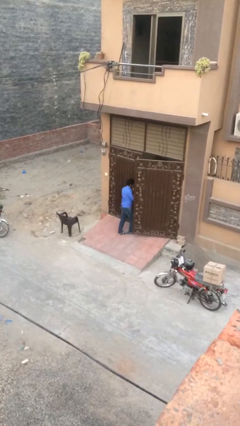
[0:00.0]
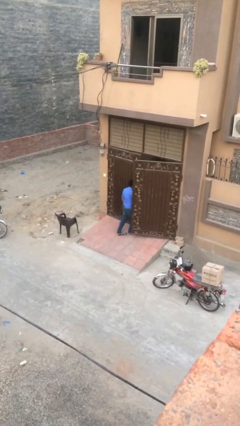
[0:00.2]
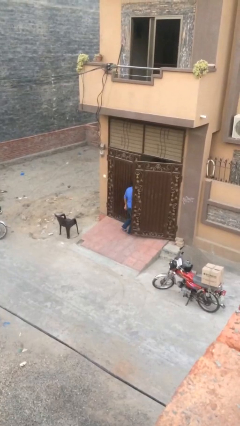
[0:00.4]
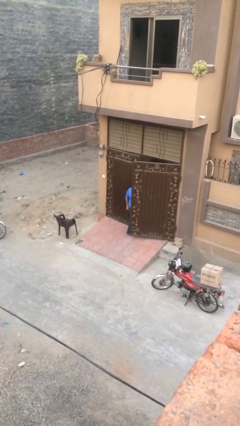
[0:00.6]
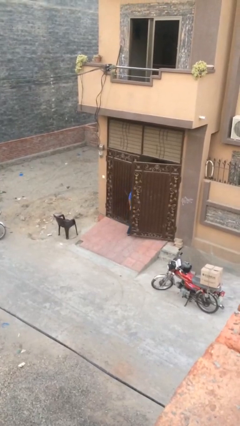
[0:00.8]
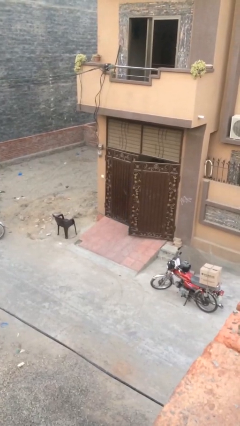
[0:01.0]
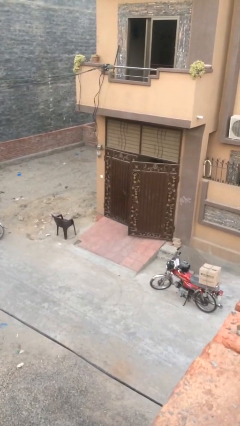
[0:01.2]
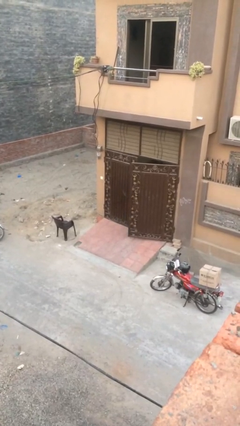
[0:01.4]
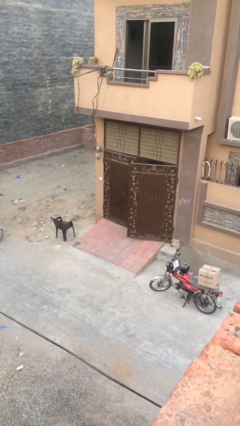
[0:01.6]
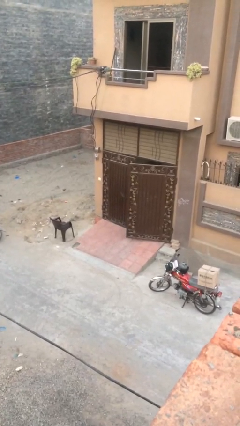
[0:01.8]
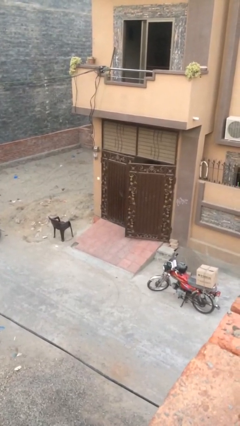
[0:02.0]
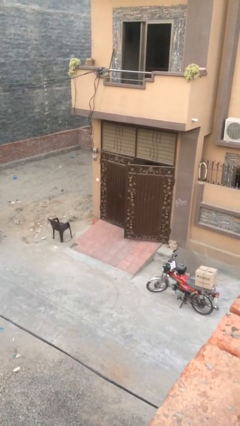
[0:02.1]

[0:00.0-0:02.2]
person exits scene through structure

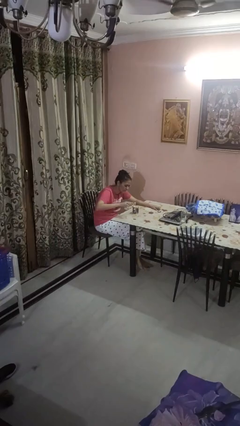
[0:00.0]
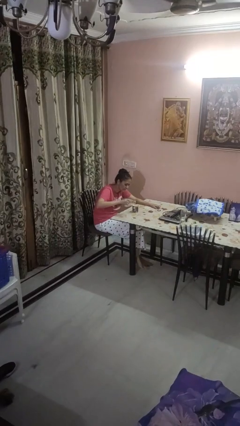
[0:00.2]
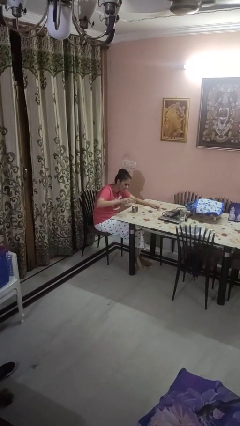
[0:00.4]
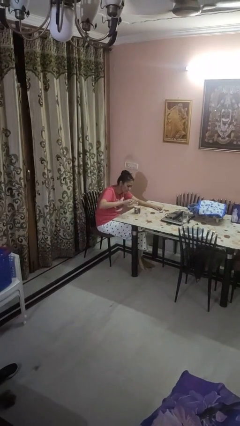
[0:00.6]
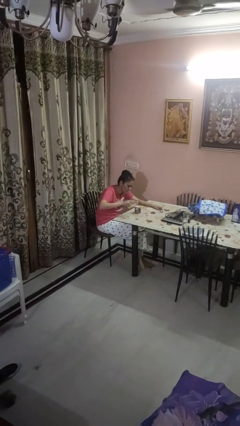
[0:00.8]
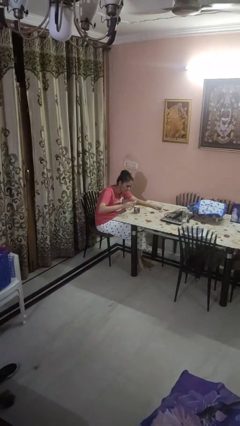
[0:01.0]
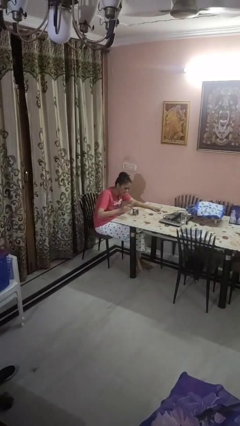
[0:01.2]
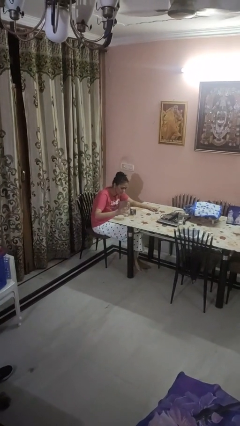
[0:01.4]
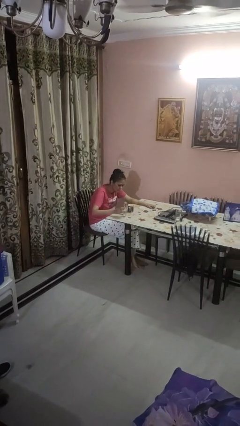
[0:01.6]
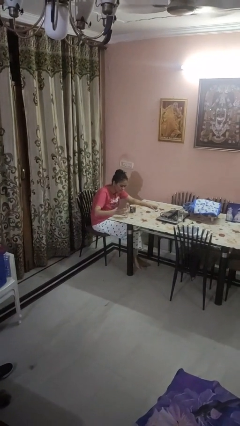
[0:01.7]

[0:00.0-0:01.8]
person pours liquid into cup

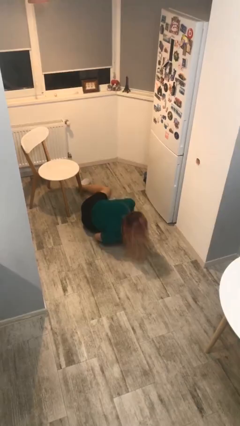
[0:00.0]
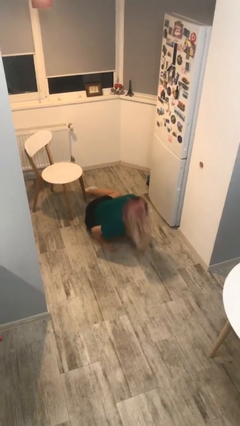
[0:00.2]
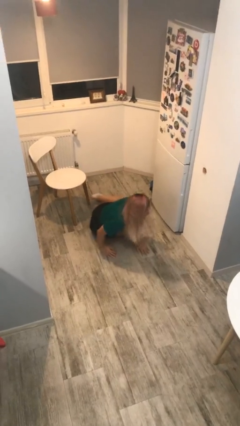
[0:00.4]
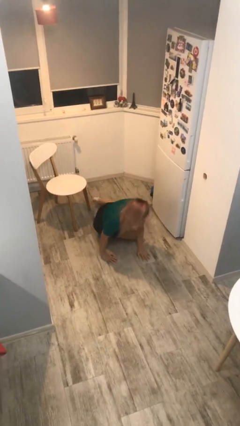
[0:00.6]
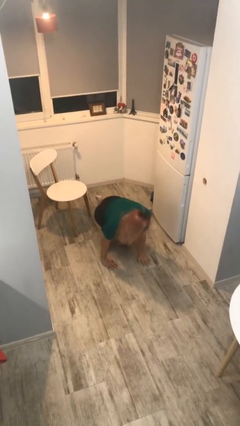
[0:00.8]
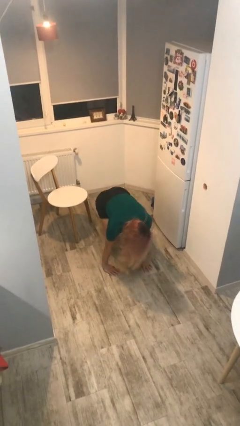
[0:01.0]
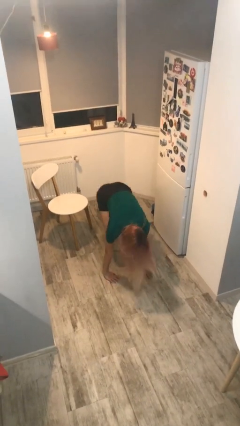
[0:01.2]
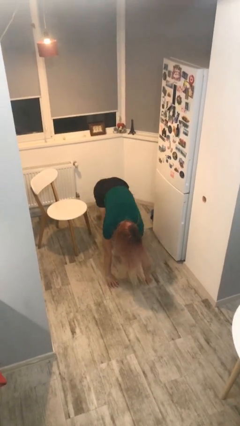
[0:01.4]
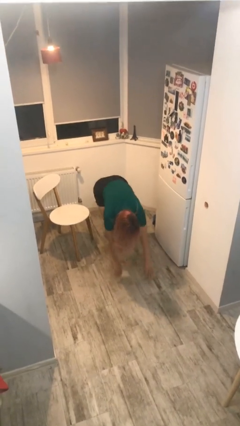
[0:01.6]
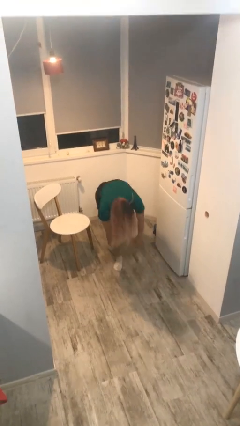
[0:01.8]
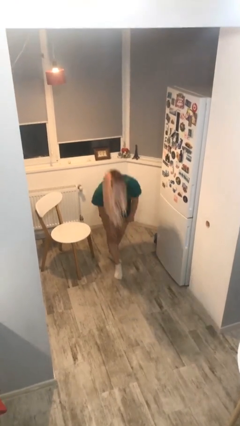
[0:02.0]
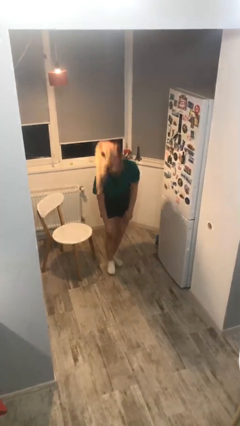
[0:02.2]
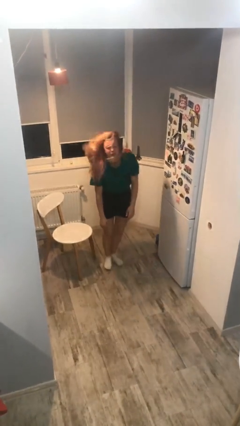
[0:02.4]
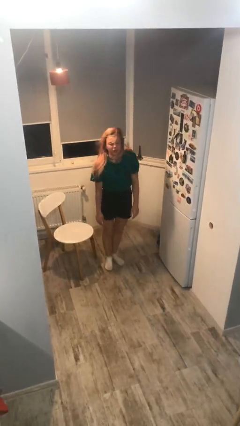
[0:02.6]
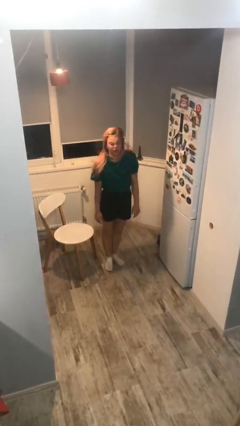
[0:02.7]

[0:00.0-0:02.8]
person stands up from floor

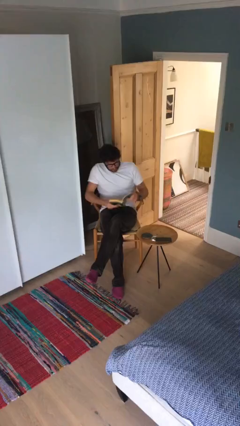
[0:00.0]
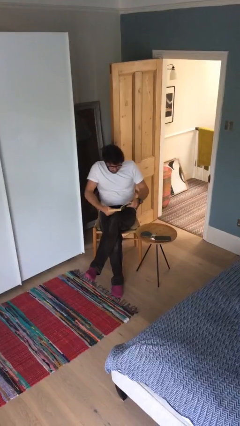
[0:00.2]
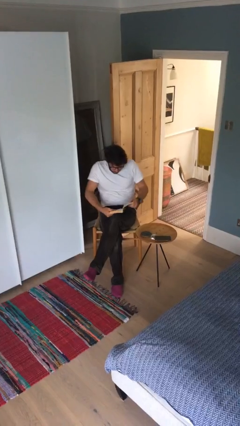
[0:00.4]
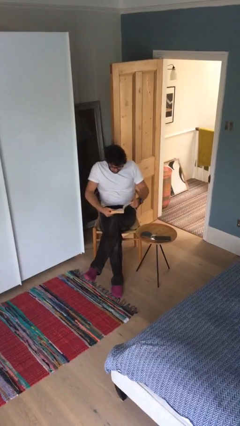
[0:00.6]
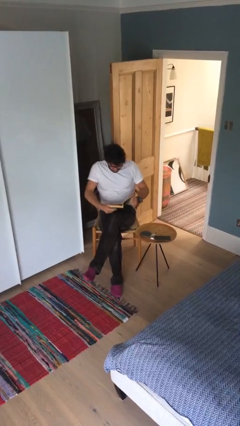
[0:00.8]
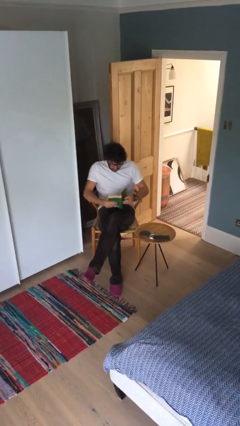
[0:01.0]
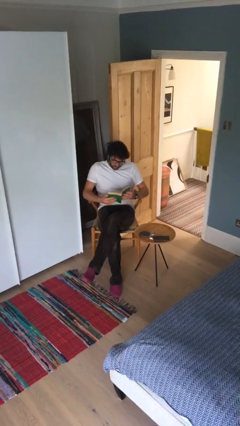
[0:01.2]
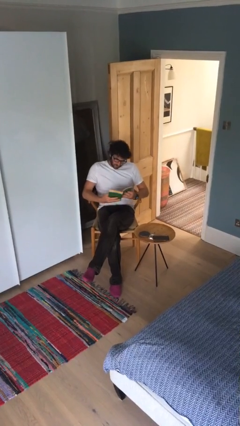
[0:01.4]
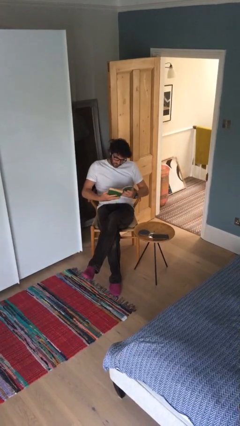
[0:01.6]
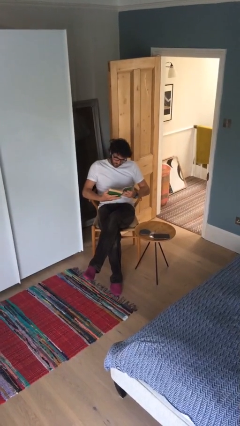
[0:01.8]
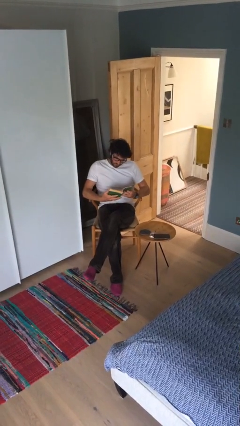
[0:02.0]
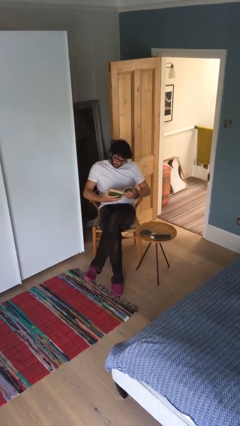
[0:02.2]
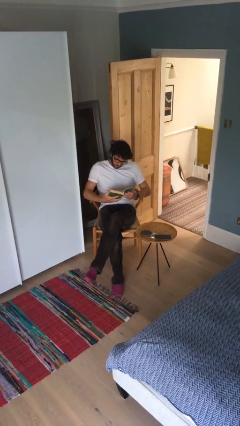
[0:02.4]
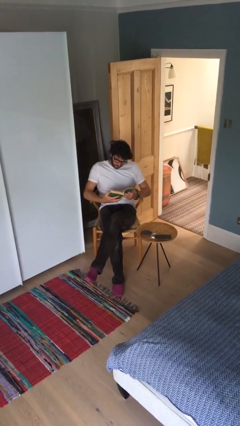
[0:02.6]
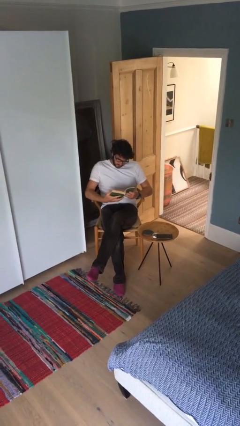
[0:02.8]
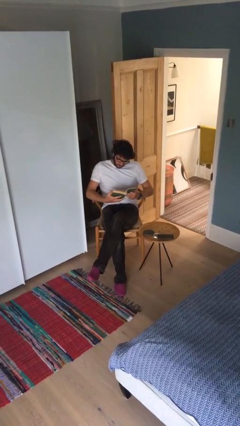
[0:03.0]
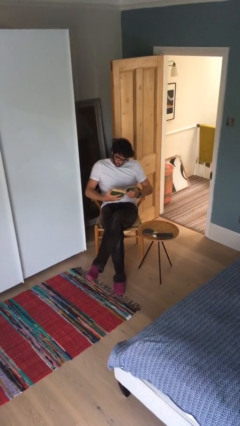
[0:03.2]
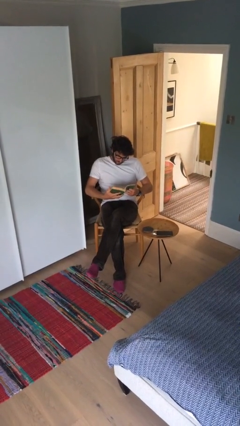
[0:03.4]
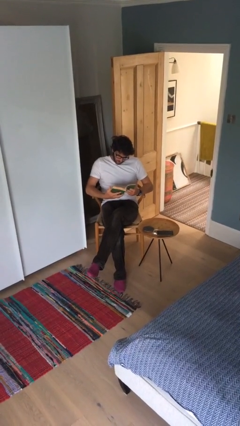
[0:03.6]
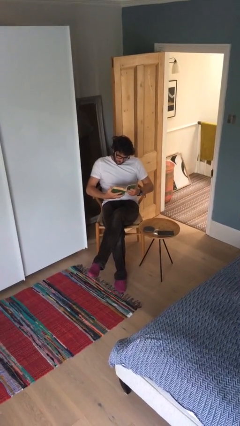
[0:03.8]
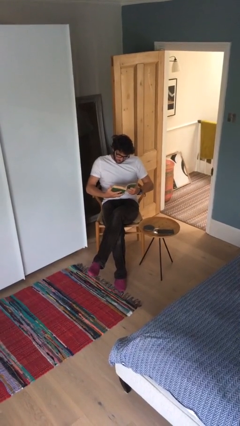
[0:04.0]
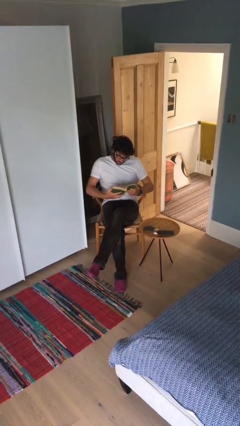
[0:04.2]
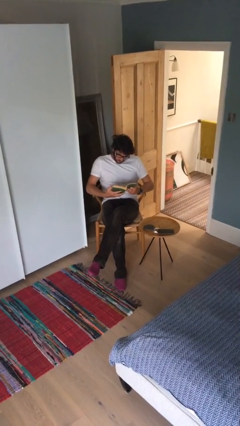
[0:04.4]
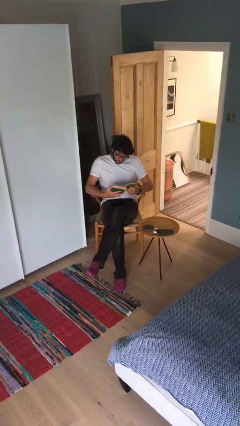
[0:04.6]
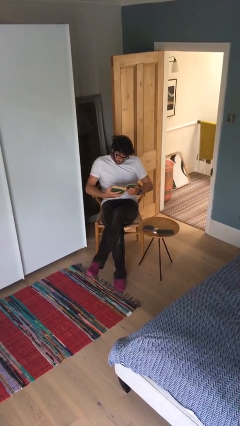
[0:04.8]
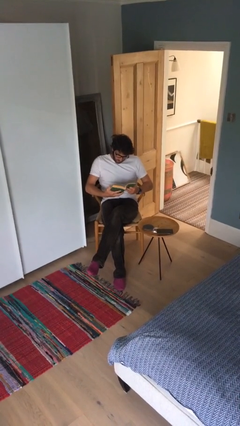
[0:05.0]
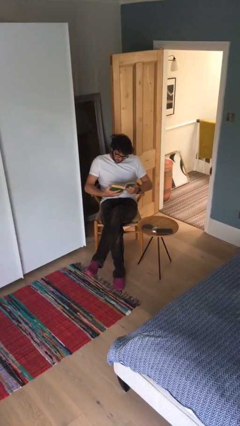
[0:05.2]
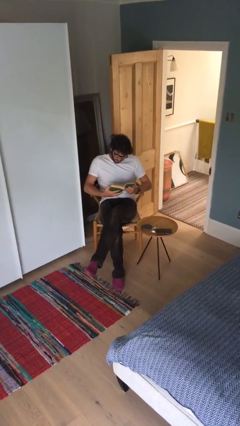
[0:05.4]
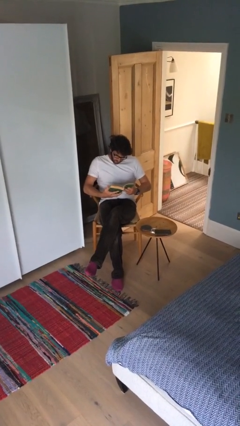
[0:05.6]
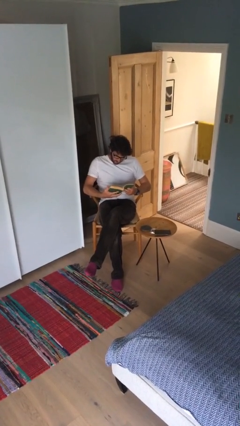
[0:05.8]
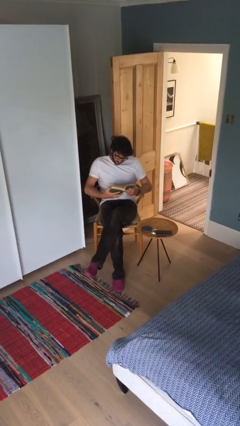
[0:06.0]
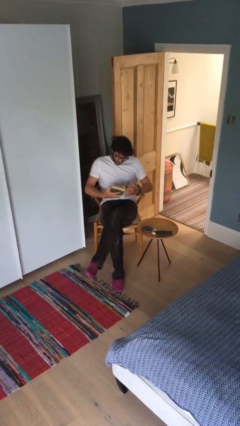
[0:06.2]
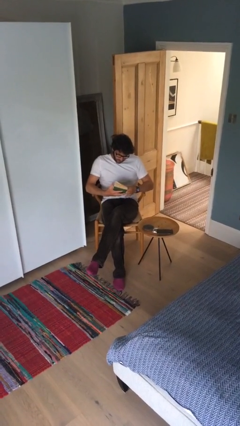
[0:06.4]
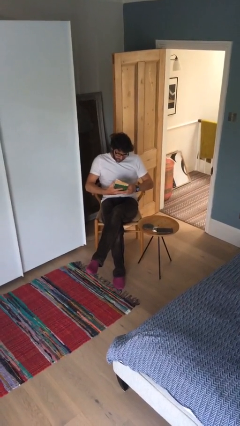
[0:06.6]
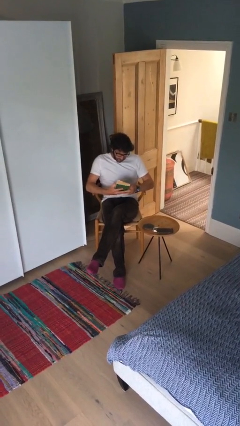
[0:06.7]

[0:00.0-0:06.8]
person reads document

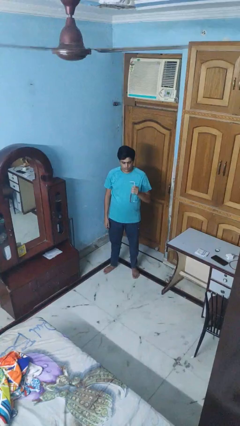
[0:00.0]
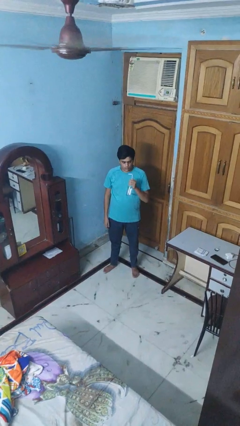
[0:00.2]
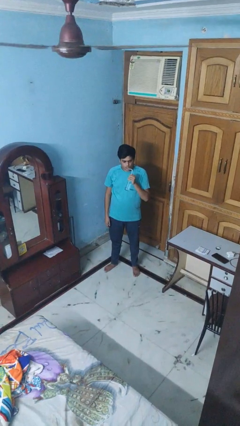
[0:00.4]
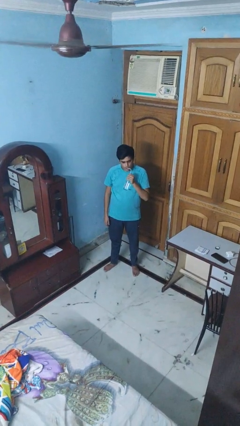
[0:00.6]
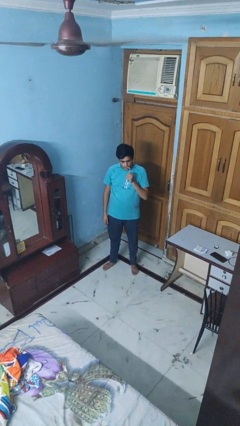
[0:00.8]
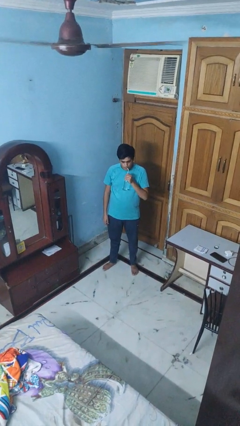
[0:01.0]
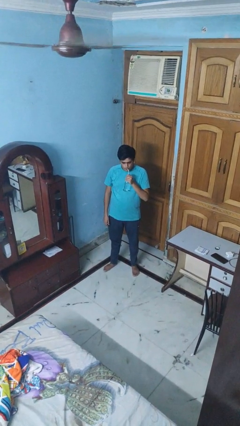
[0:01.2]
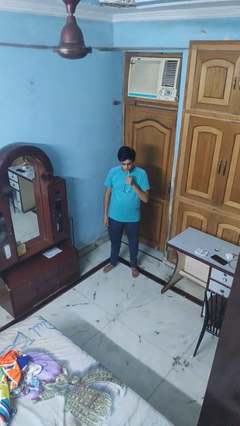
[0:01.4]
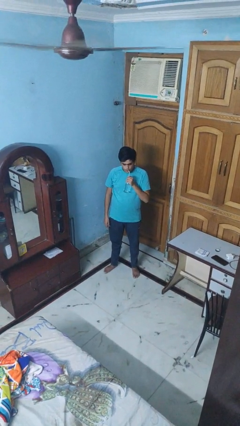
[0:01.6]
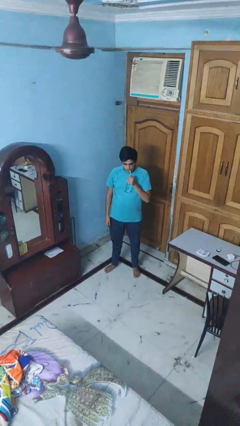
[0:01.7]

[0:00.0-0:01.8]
person drinks from straw

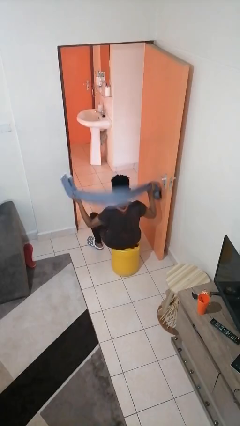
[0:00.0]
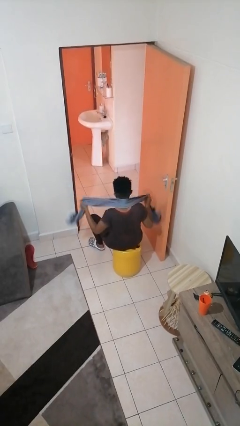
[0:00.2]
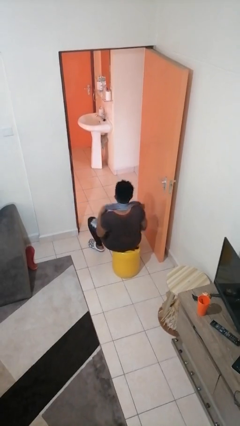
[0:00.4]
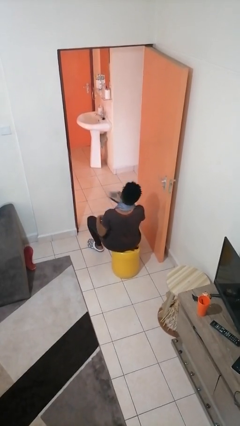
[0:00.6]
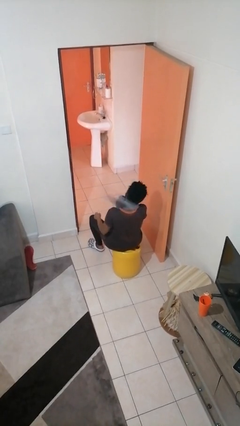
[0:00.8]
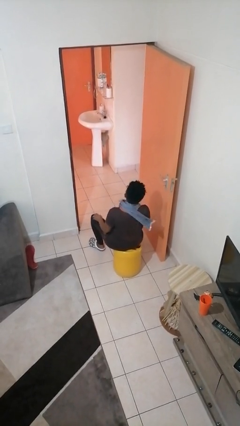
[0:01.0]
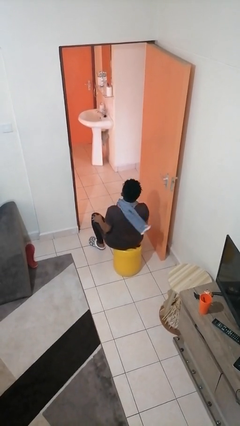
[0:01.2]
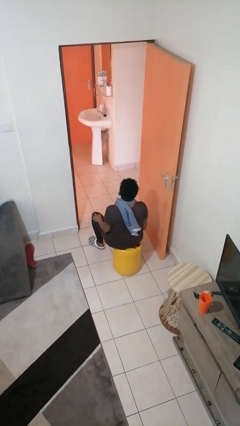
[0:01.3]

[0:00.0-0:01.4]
person puts on scarf

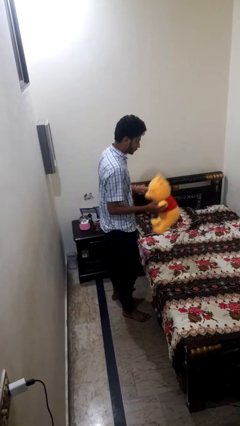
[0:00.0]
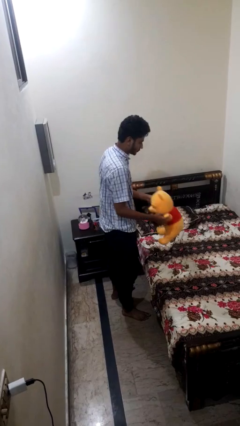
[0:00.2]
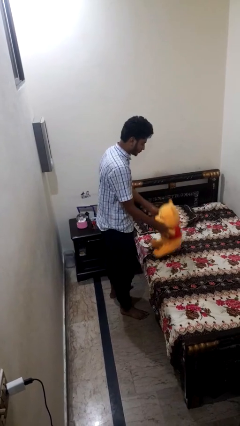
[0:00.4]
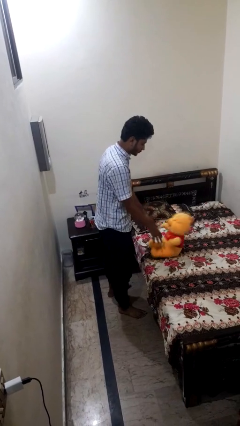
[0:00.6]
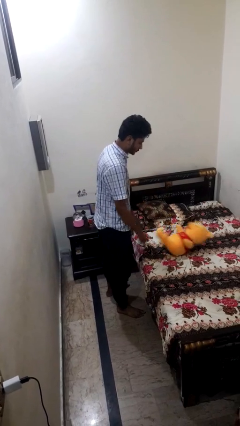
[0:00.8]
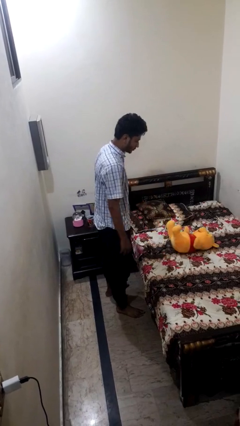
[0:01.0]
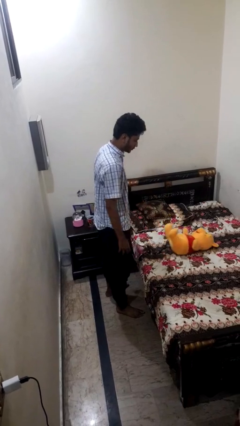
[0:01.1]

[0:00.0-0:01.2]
person puts down object on bed
